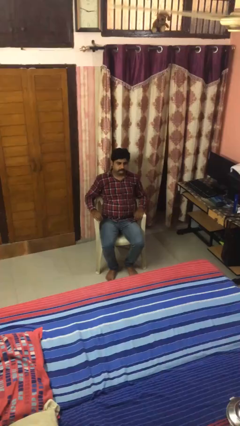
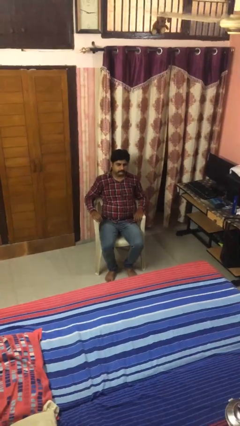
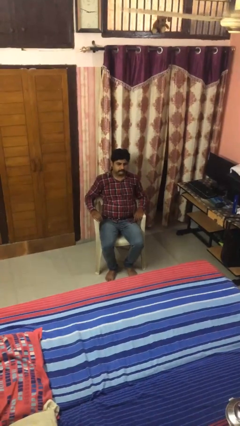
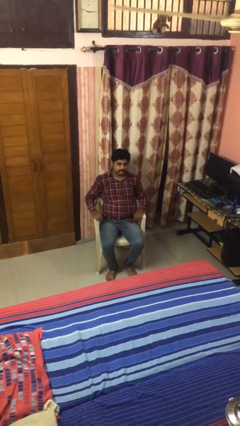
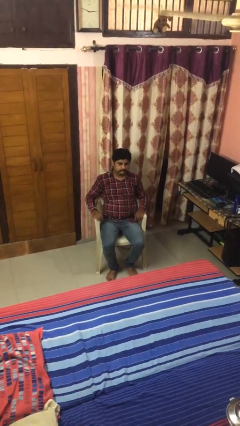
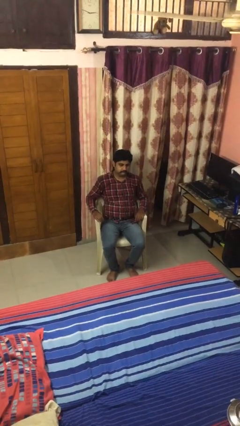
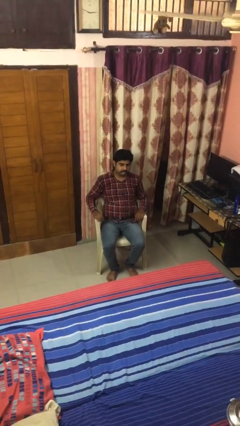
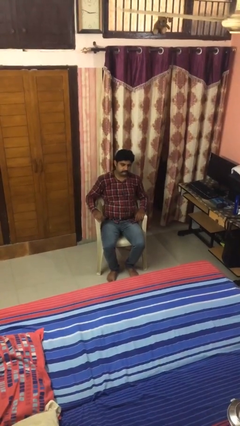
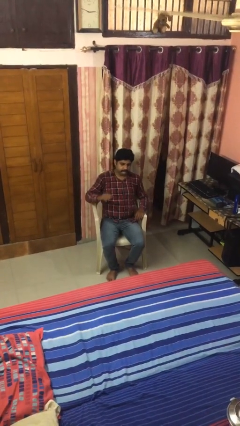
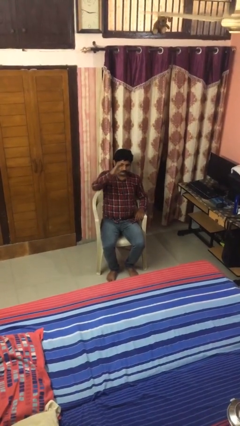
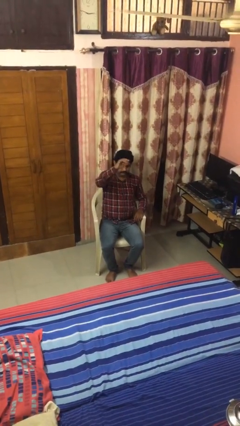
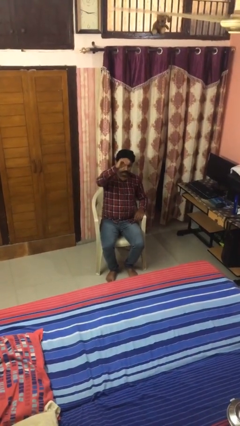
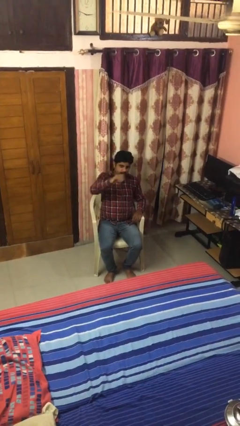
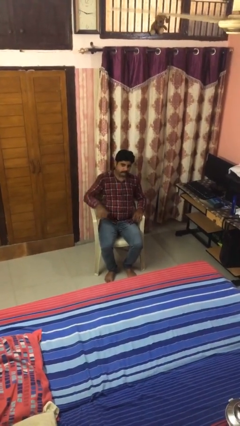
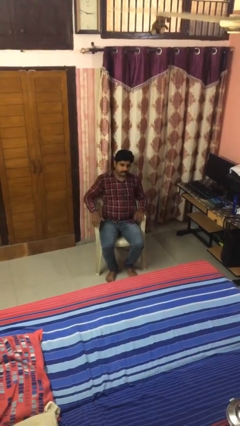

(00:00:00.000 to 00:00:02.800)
person gestures come here

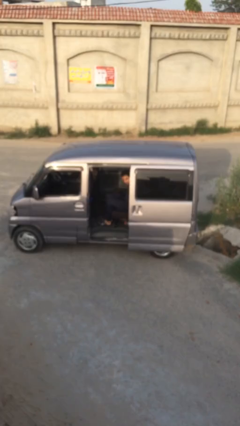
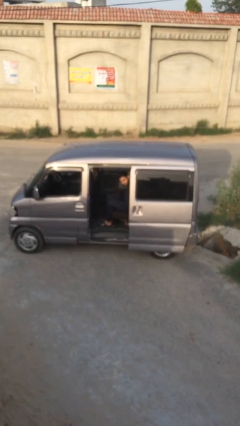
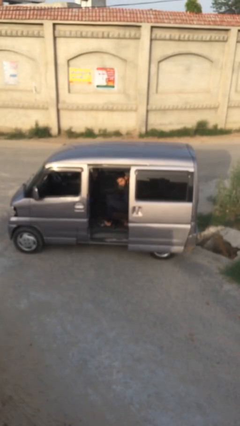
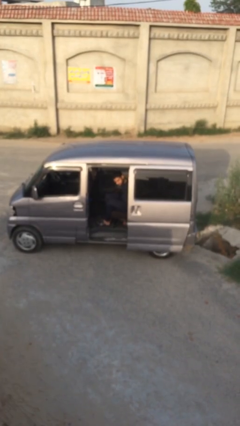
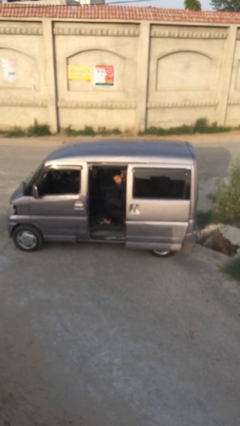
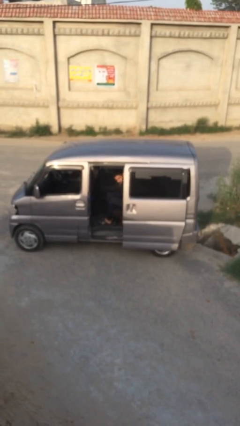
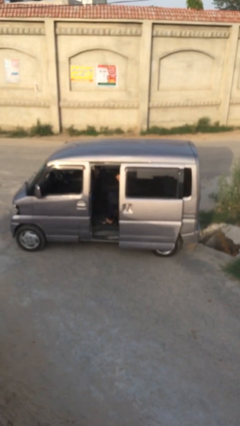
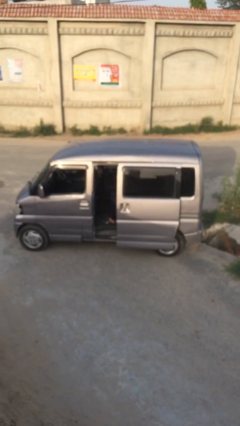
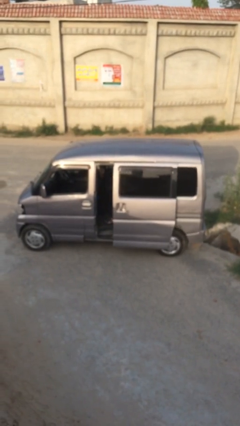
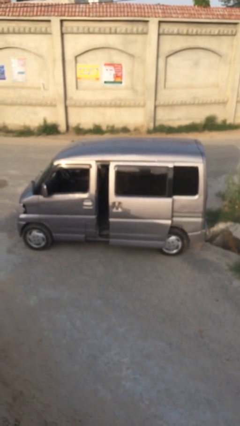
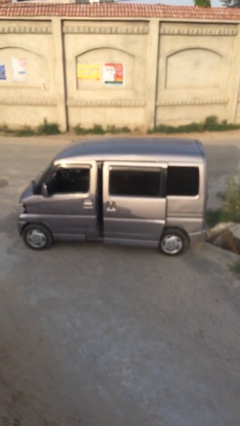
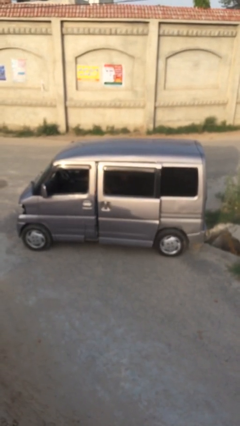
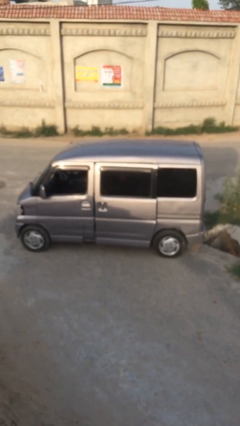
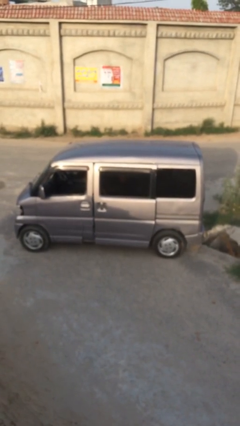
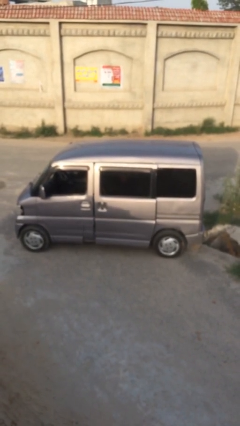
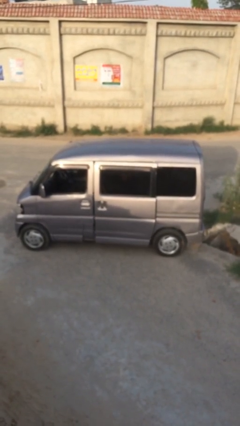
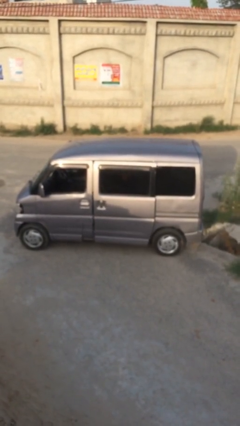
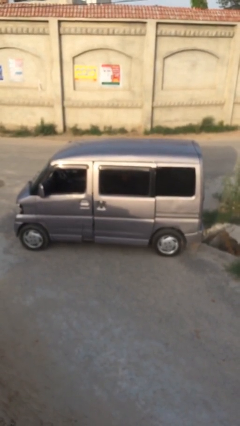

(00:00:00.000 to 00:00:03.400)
person closes car door

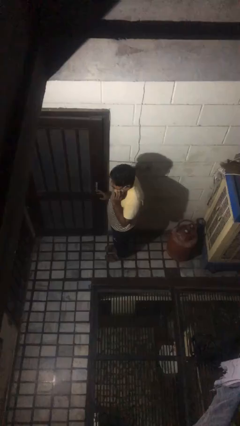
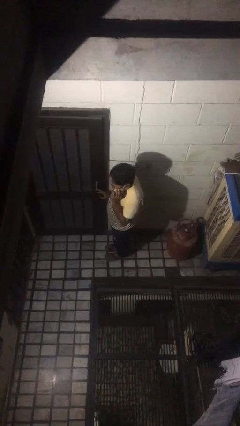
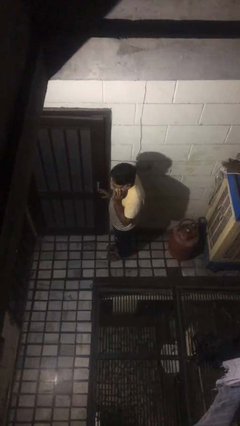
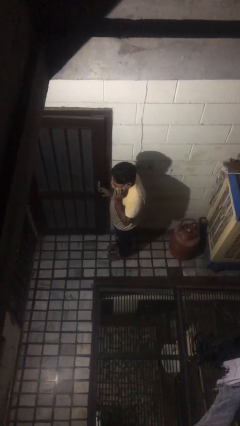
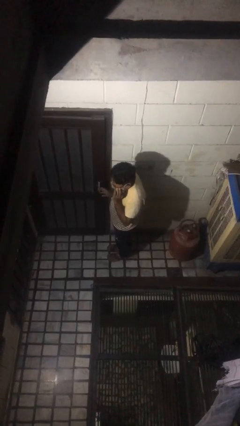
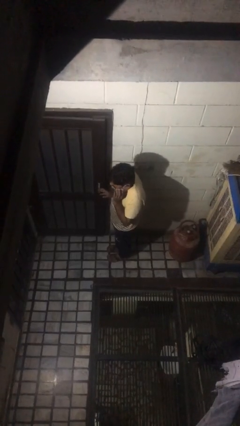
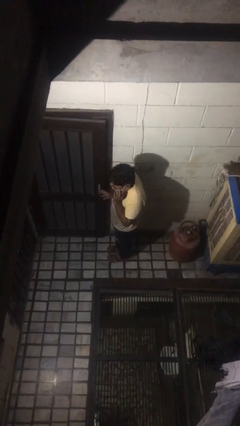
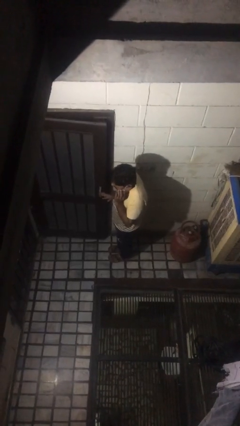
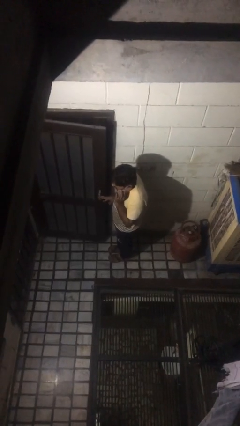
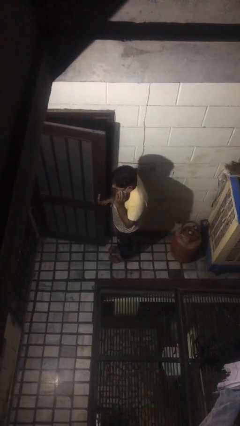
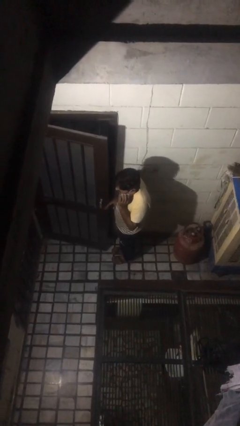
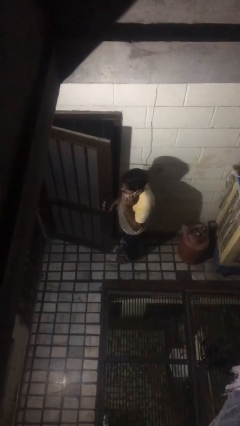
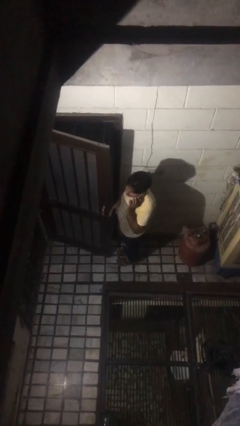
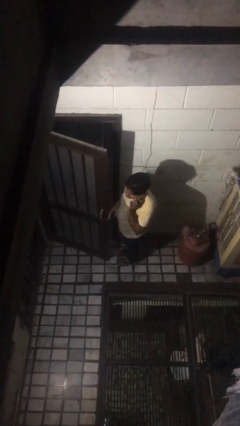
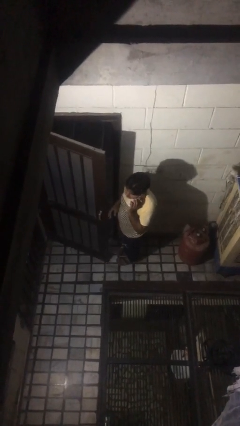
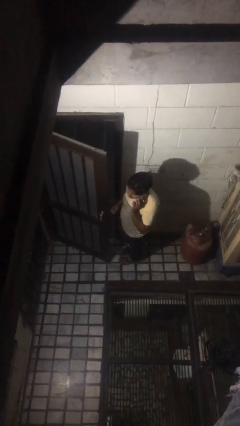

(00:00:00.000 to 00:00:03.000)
person opens facility door

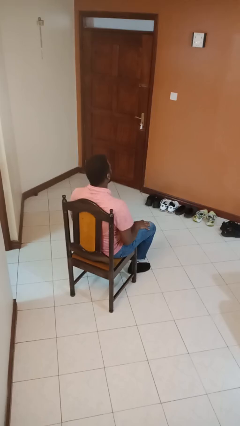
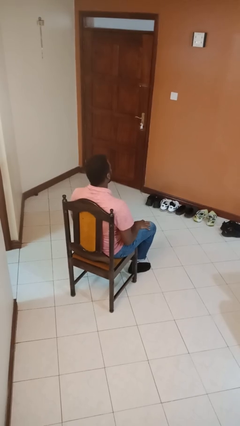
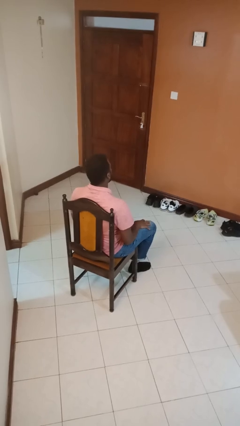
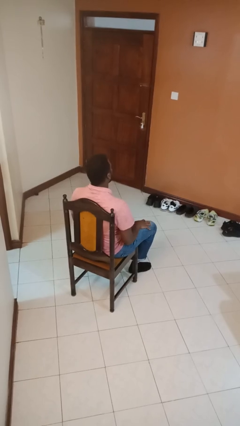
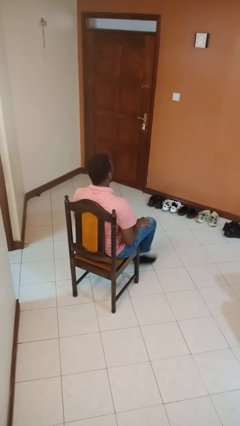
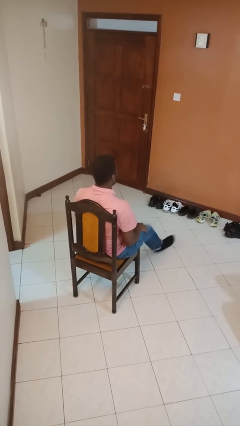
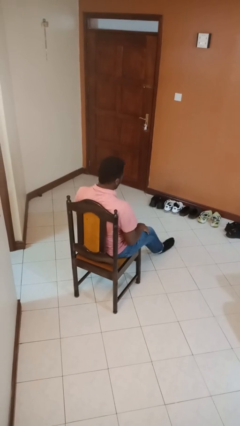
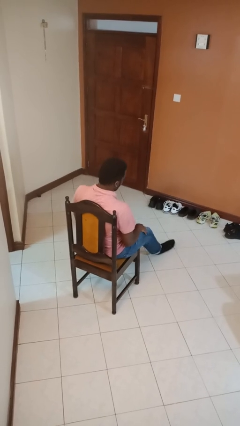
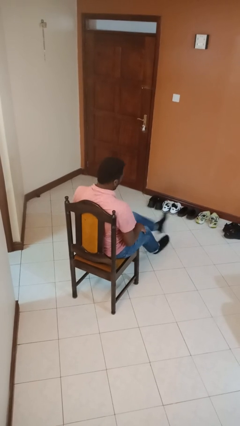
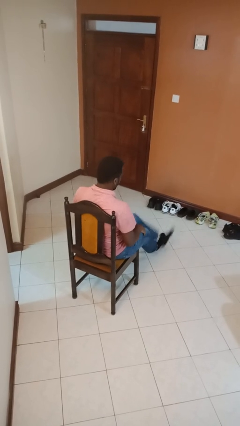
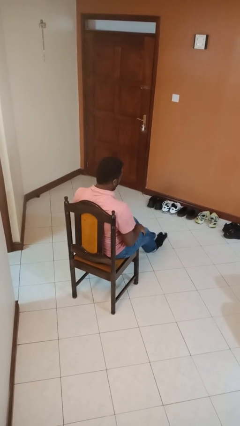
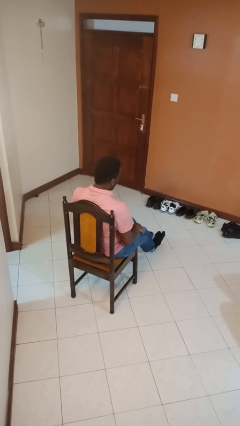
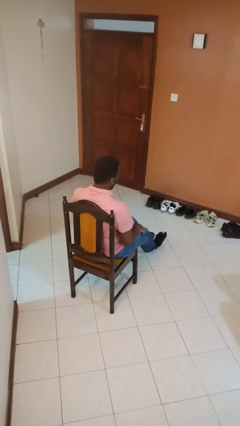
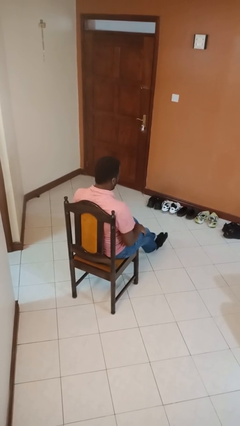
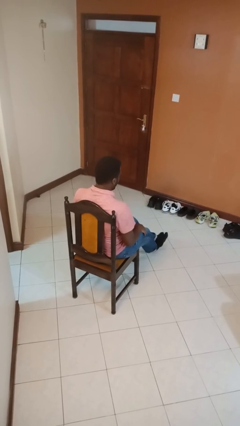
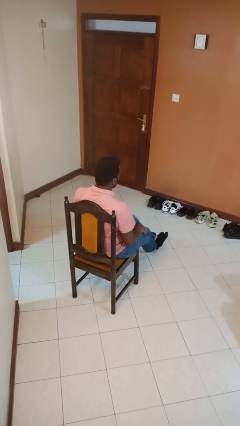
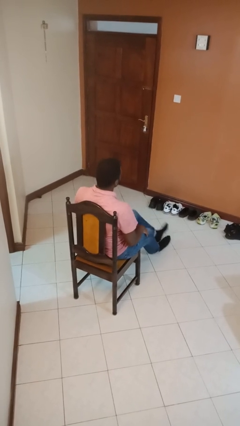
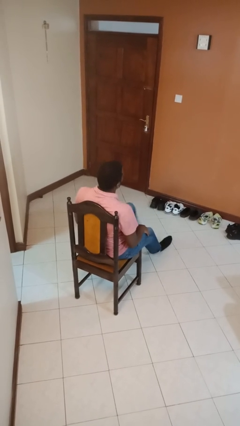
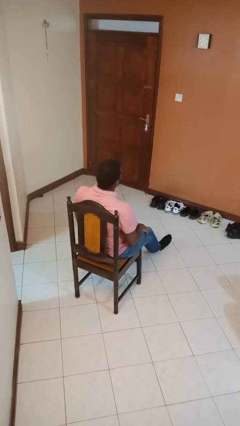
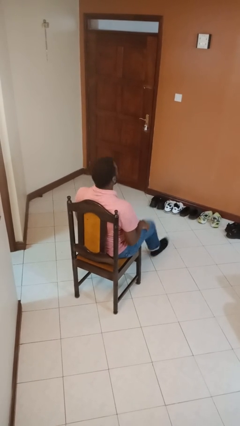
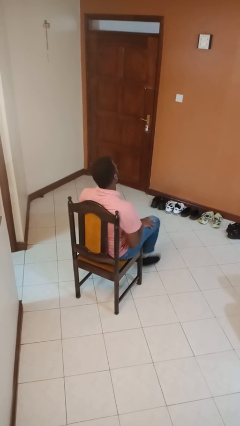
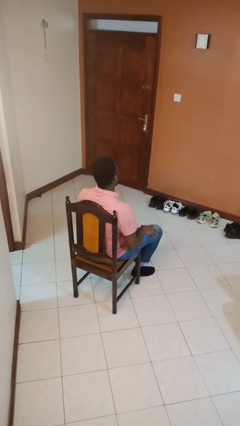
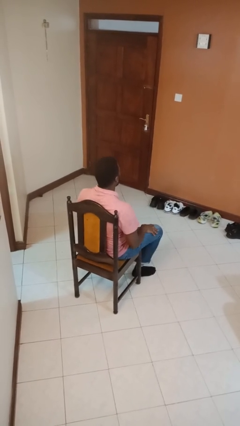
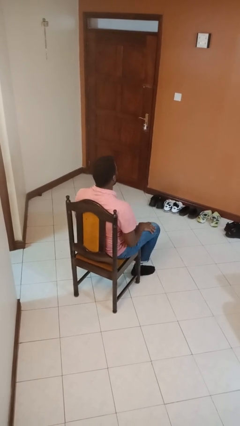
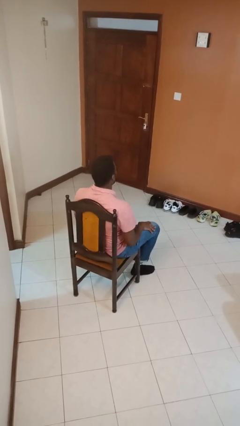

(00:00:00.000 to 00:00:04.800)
person crosses legs

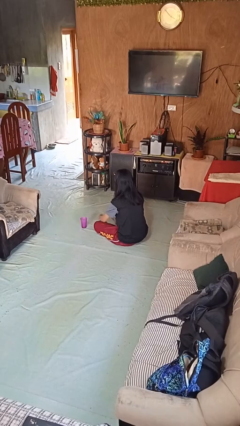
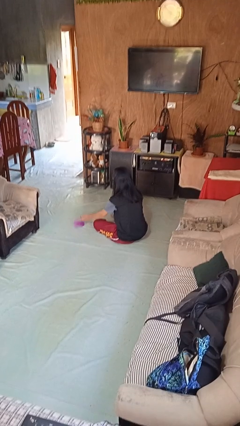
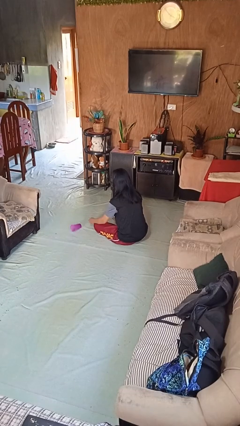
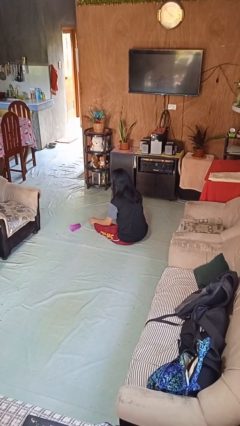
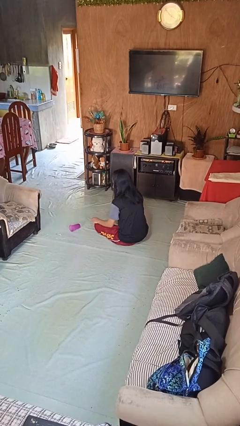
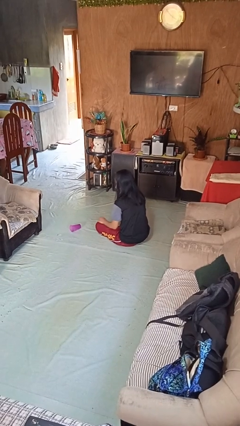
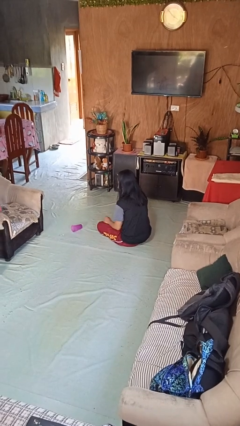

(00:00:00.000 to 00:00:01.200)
person spills on floor

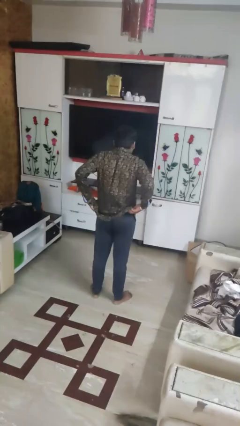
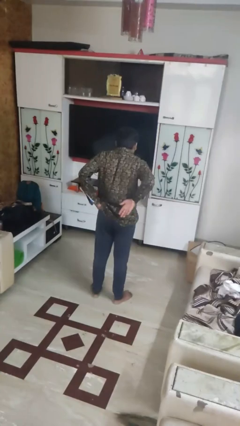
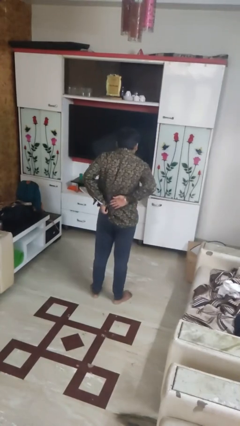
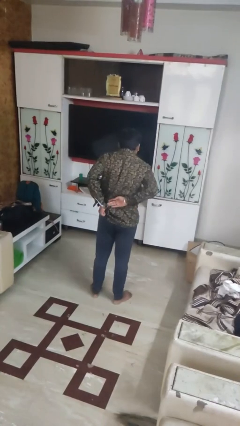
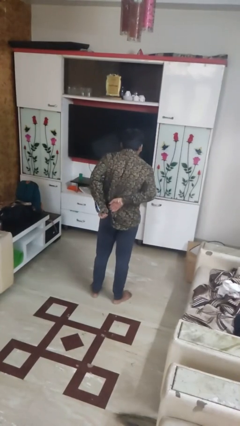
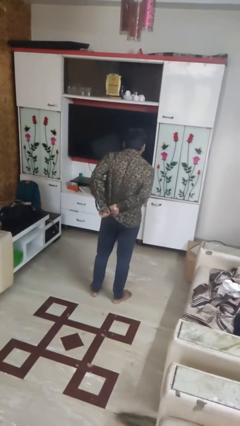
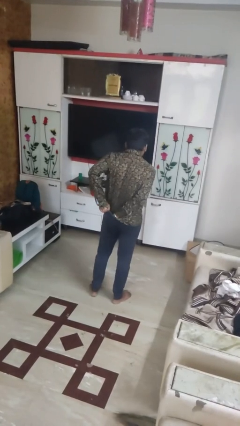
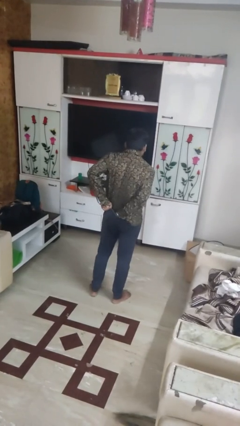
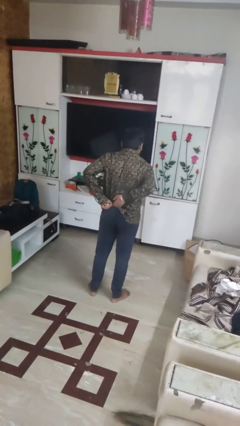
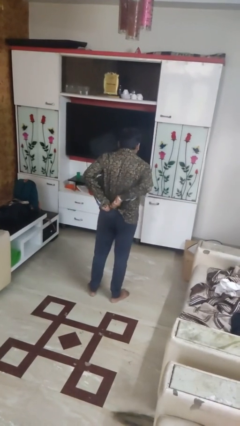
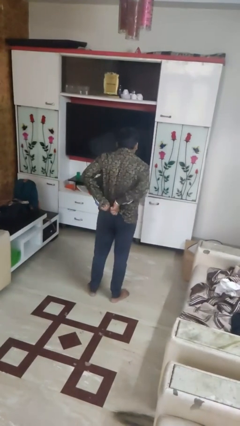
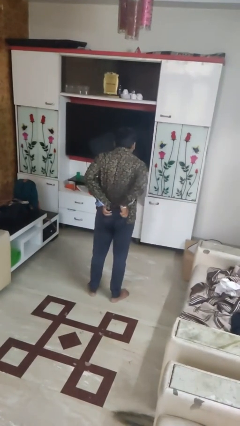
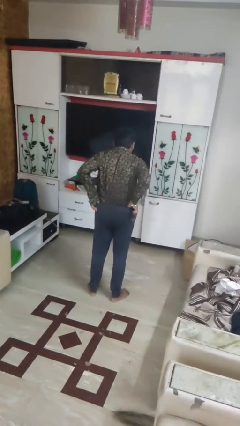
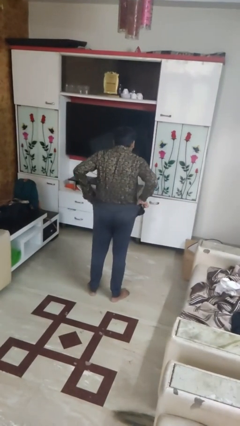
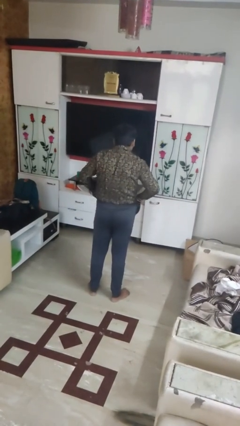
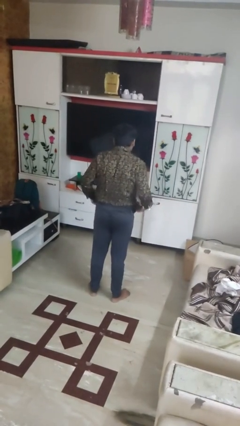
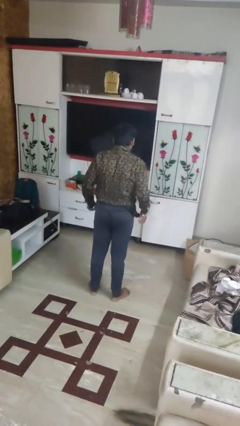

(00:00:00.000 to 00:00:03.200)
person tucks in shirt
